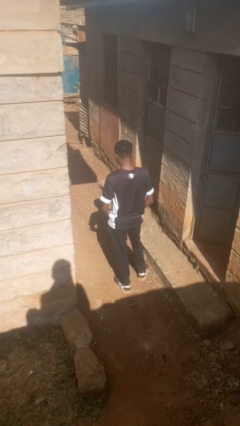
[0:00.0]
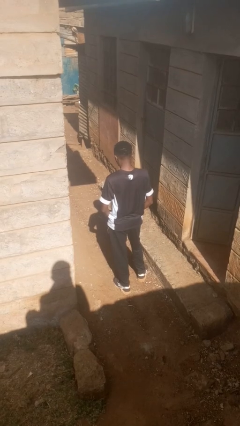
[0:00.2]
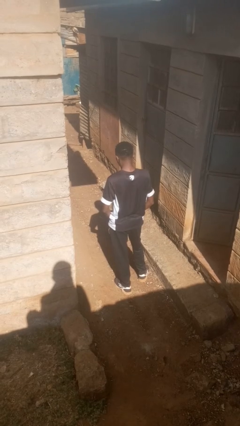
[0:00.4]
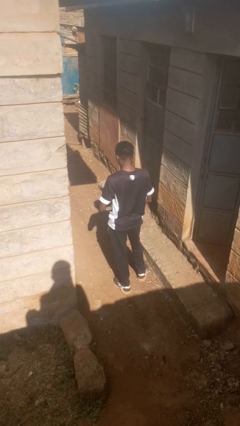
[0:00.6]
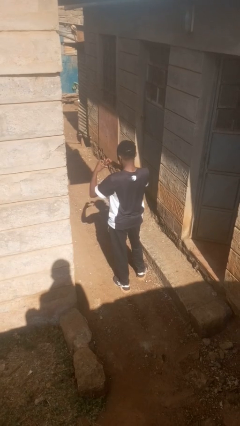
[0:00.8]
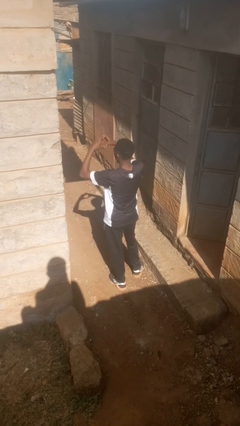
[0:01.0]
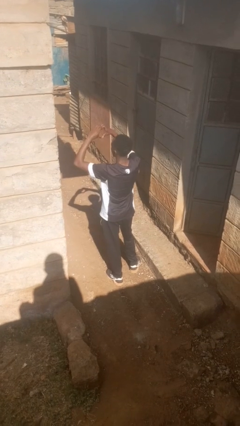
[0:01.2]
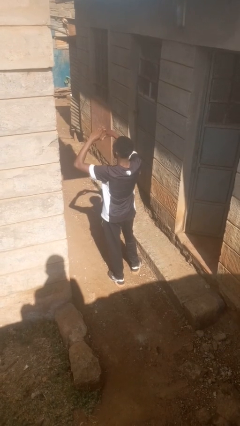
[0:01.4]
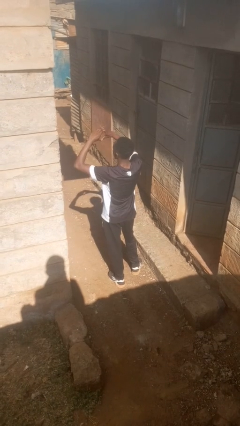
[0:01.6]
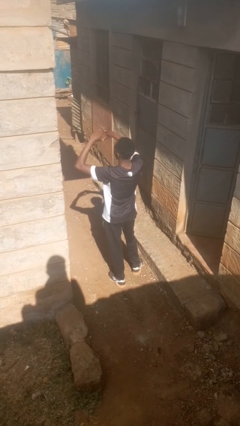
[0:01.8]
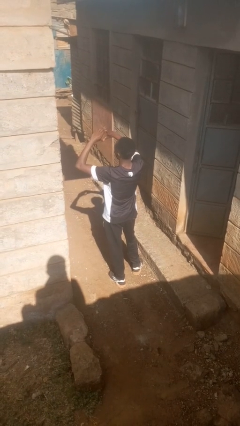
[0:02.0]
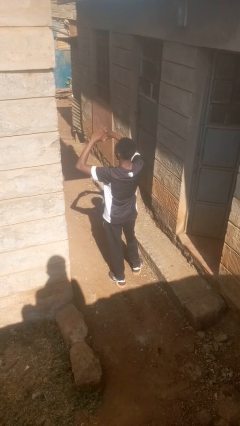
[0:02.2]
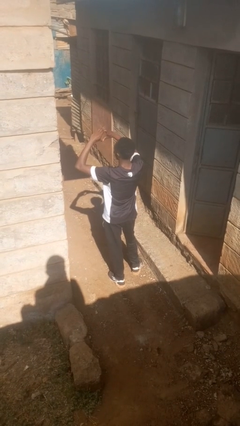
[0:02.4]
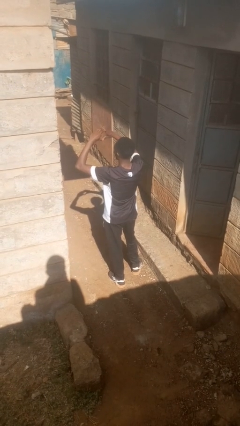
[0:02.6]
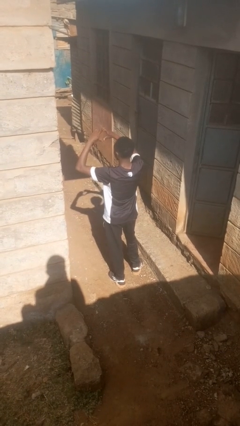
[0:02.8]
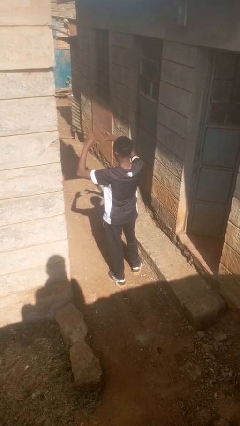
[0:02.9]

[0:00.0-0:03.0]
person gestures heart

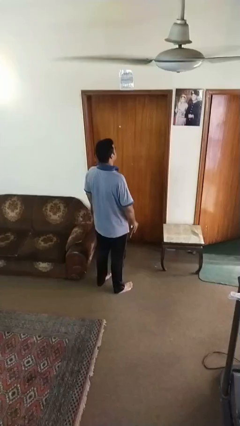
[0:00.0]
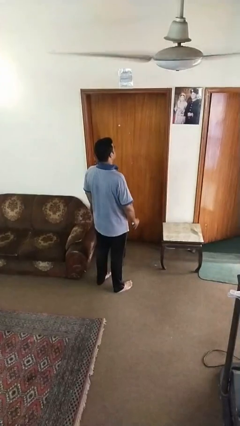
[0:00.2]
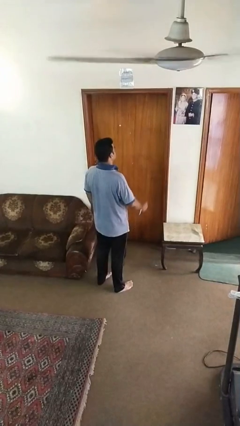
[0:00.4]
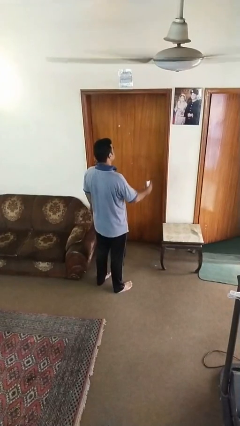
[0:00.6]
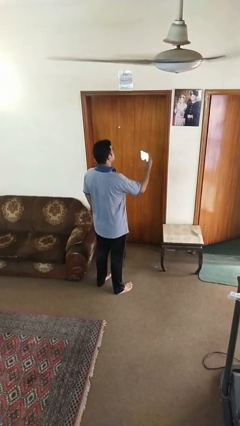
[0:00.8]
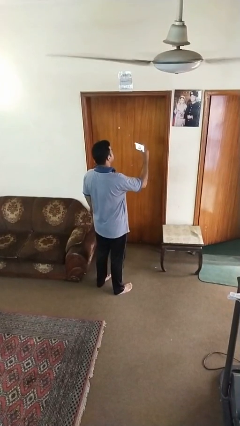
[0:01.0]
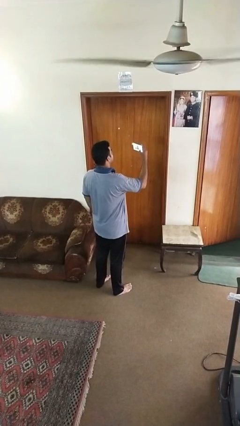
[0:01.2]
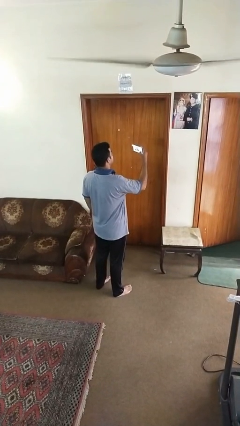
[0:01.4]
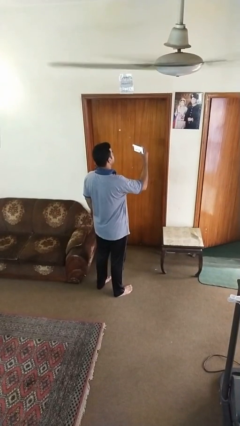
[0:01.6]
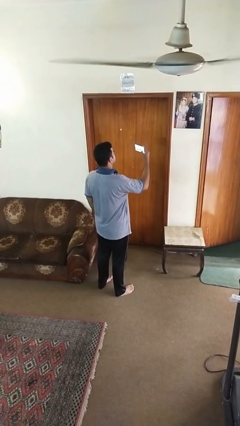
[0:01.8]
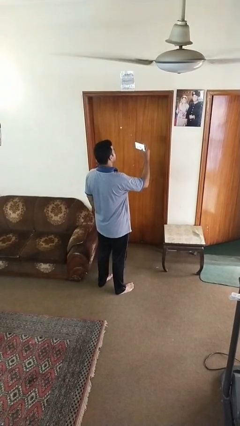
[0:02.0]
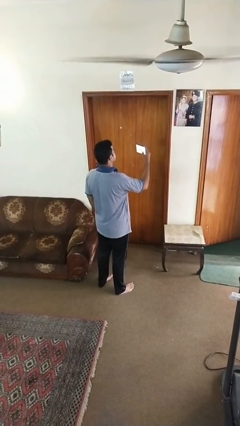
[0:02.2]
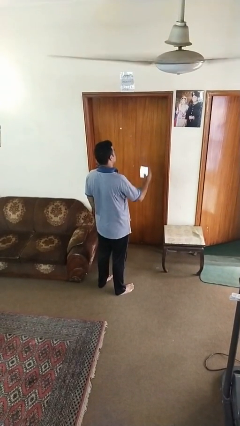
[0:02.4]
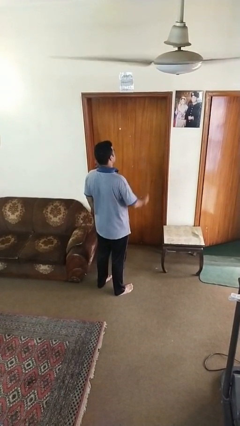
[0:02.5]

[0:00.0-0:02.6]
person takes selfie

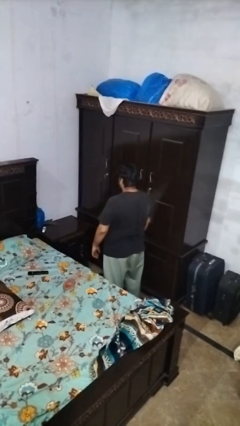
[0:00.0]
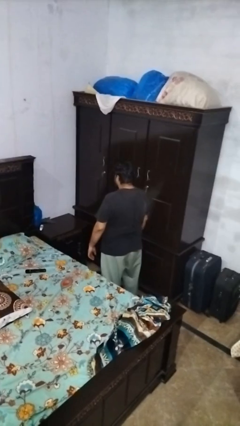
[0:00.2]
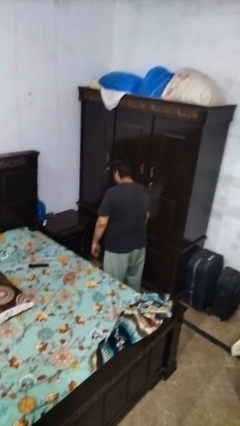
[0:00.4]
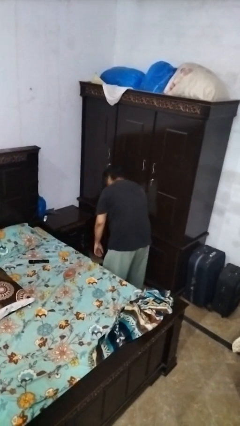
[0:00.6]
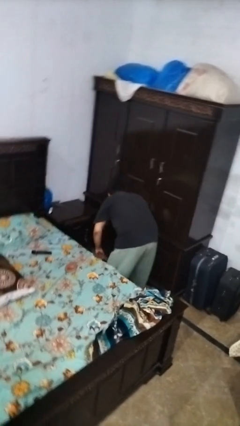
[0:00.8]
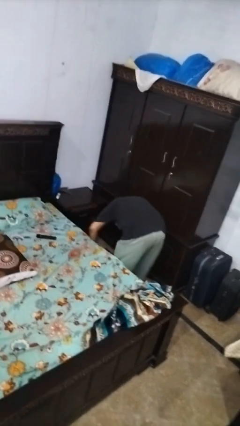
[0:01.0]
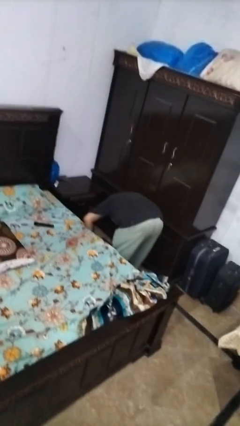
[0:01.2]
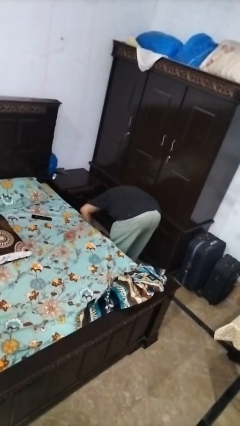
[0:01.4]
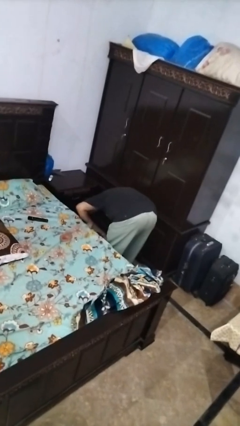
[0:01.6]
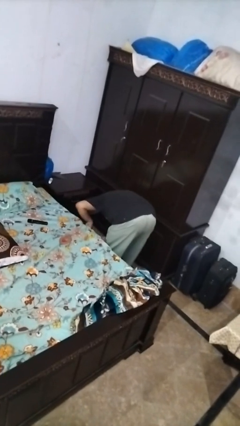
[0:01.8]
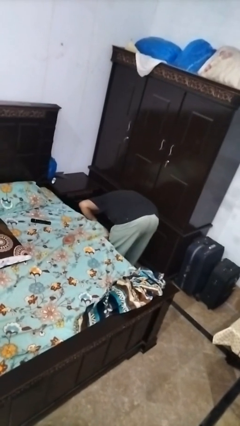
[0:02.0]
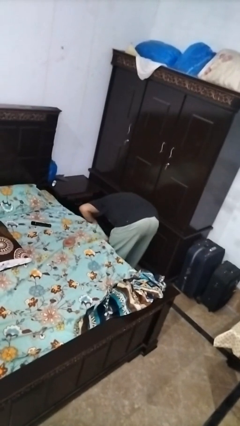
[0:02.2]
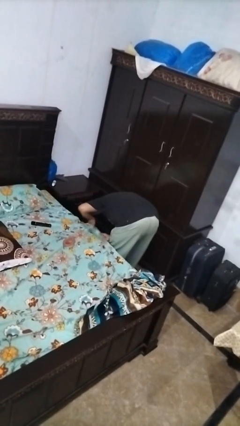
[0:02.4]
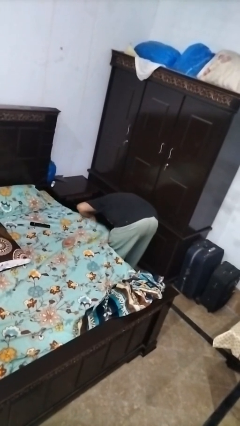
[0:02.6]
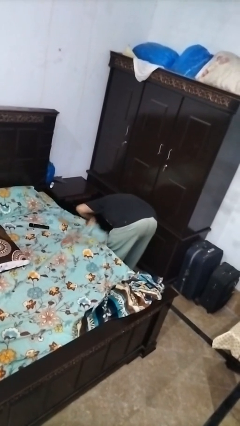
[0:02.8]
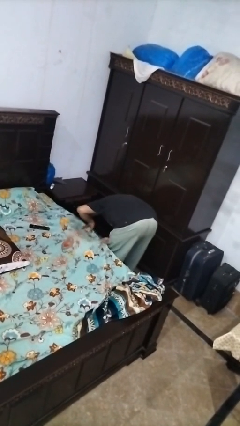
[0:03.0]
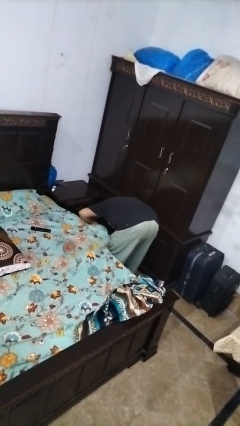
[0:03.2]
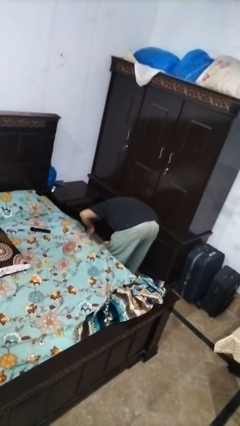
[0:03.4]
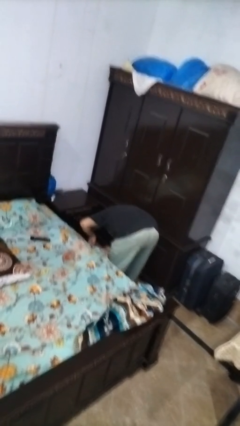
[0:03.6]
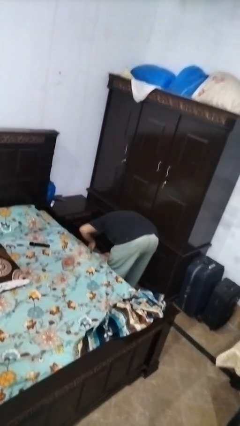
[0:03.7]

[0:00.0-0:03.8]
person searches under bed

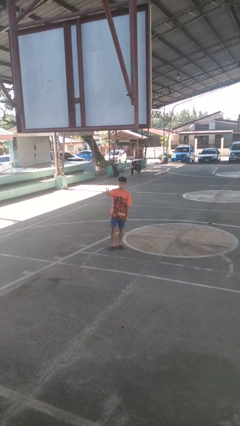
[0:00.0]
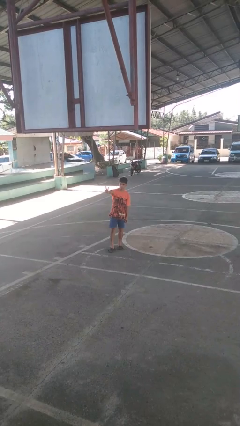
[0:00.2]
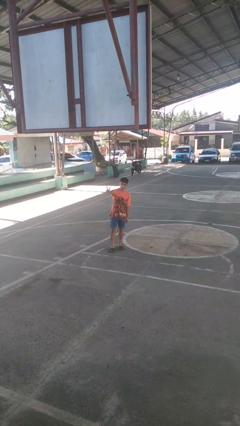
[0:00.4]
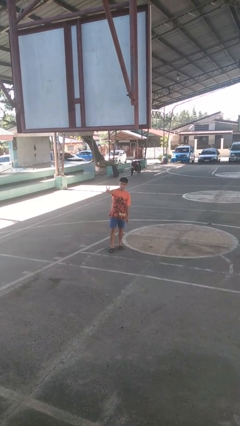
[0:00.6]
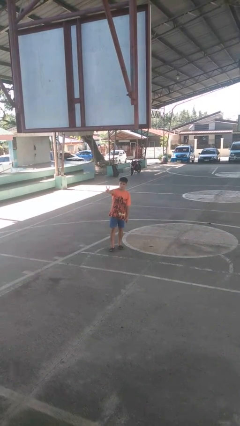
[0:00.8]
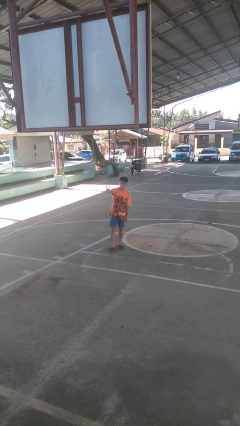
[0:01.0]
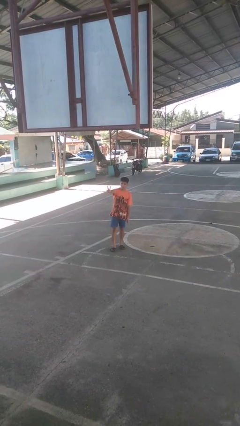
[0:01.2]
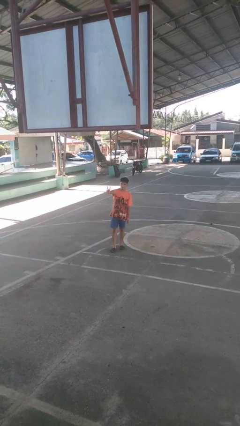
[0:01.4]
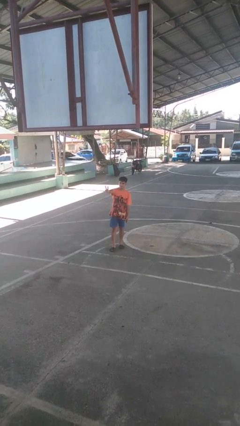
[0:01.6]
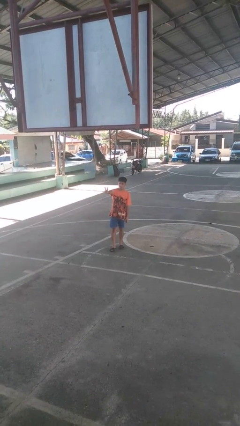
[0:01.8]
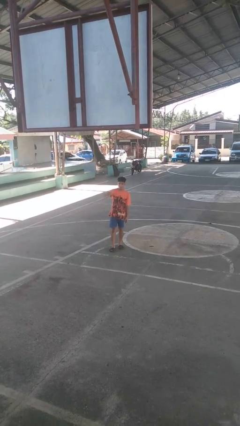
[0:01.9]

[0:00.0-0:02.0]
person gestures peace

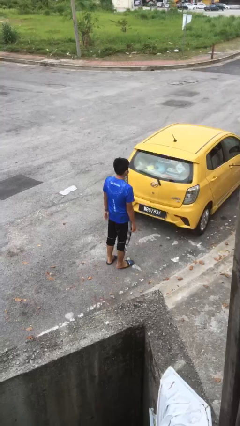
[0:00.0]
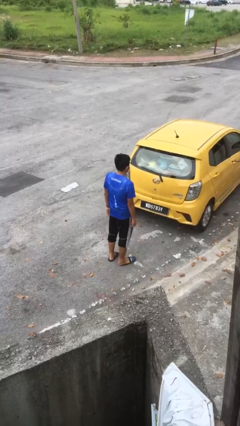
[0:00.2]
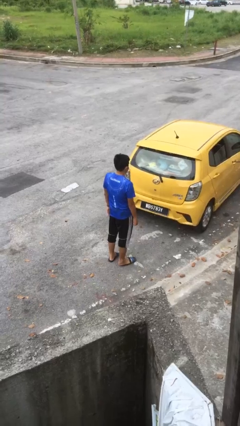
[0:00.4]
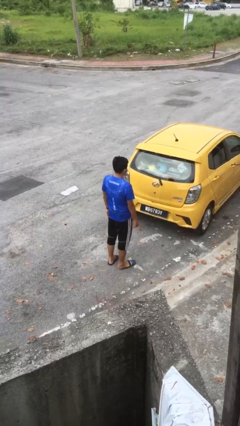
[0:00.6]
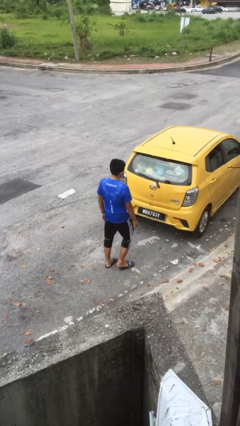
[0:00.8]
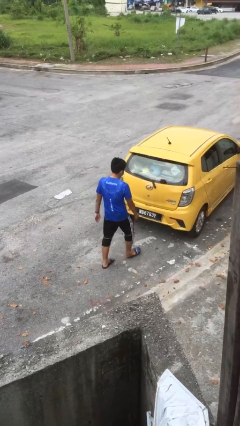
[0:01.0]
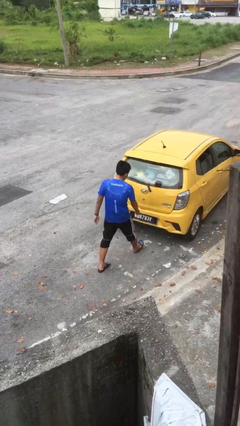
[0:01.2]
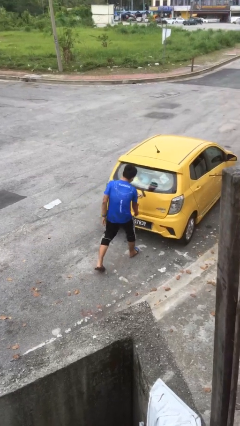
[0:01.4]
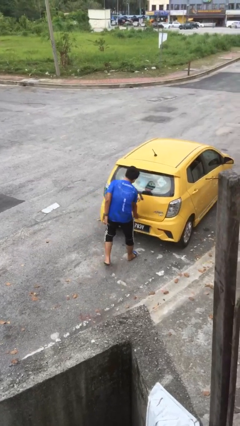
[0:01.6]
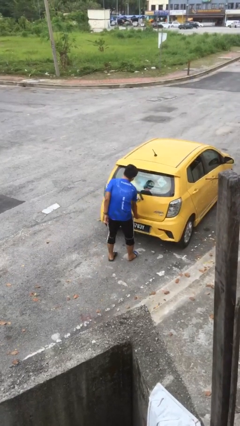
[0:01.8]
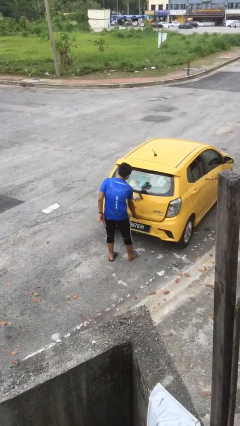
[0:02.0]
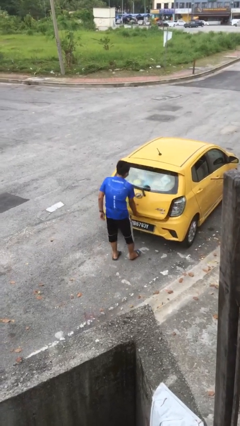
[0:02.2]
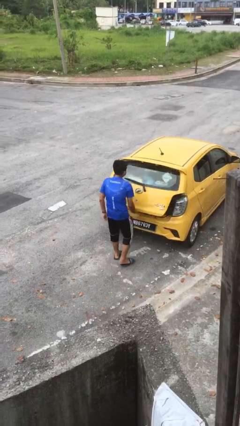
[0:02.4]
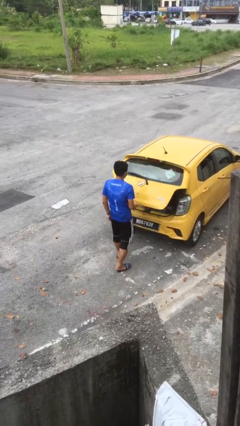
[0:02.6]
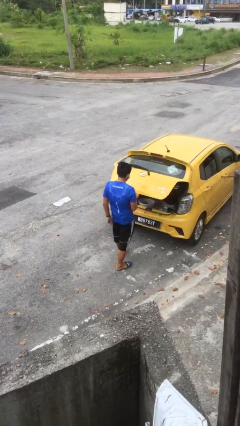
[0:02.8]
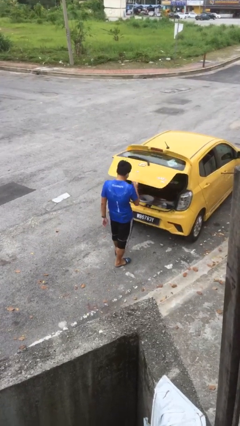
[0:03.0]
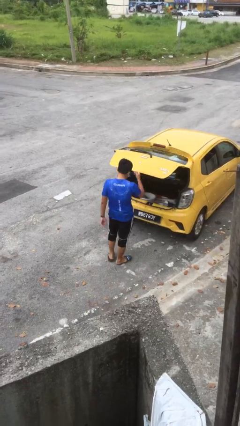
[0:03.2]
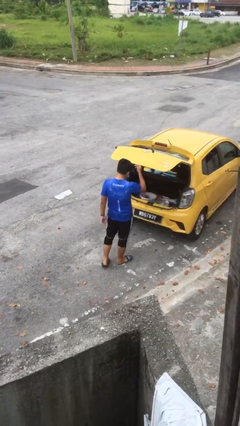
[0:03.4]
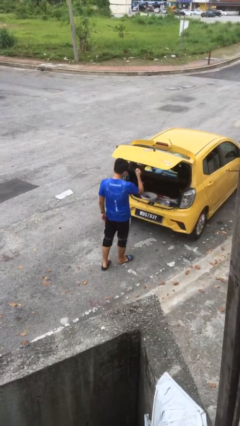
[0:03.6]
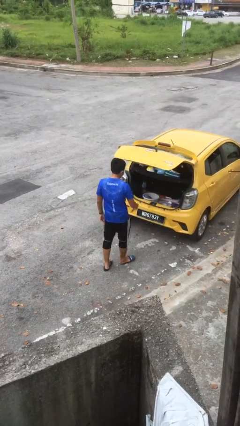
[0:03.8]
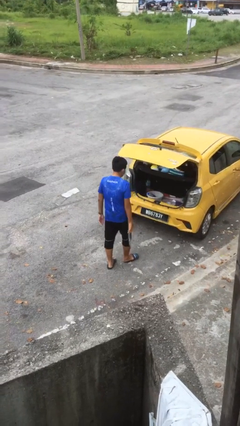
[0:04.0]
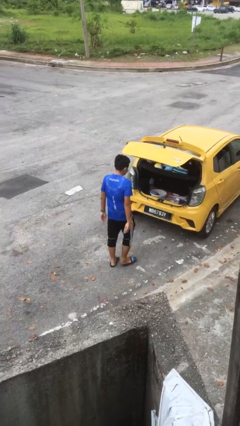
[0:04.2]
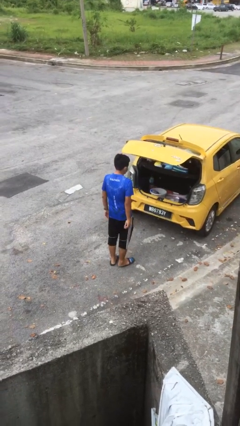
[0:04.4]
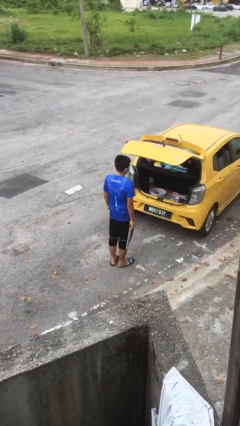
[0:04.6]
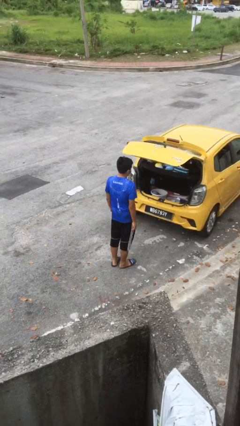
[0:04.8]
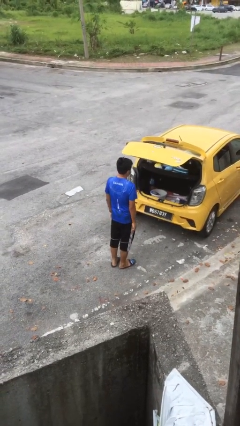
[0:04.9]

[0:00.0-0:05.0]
person opens car trunk

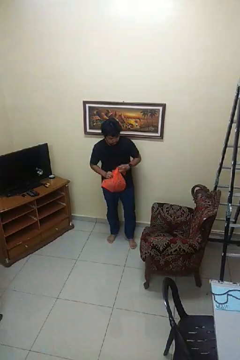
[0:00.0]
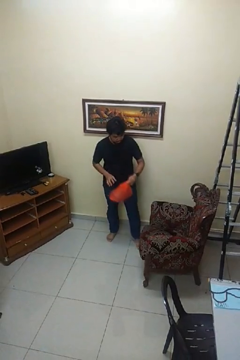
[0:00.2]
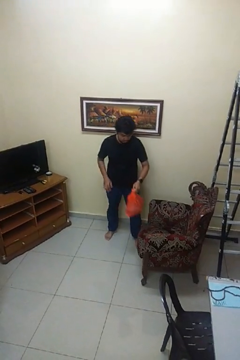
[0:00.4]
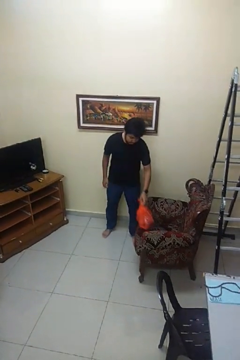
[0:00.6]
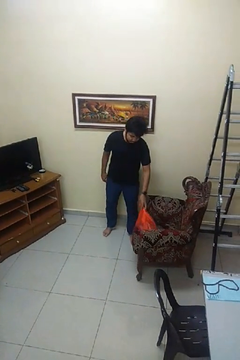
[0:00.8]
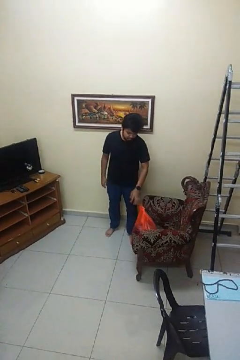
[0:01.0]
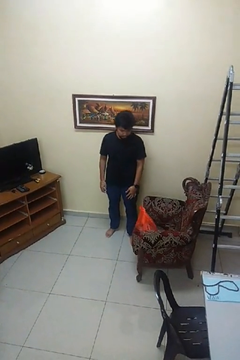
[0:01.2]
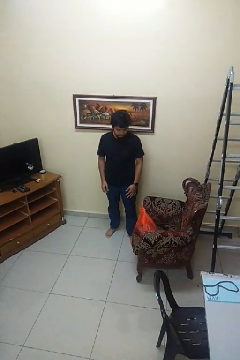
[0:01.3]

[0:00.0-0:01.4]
person puts down object on couch
